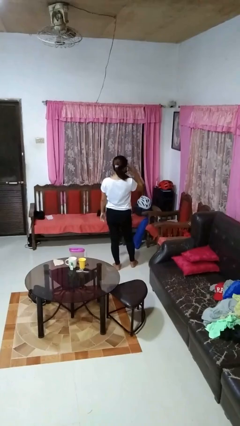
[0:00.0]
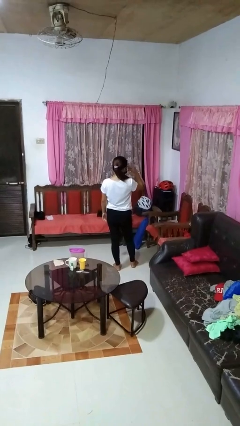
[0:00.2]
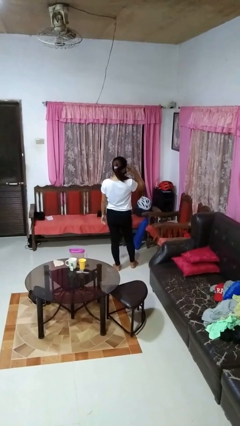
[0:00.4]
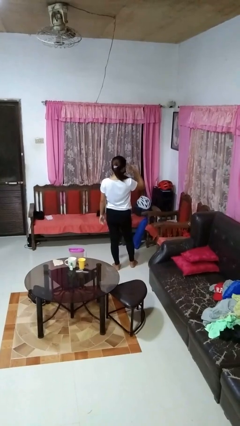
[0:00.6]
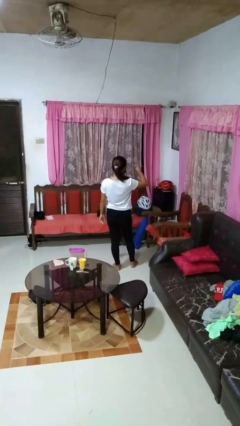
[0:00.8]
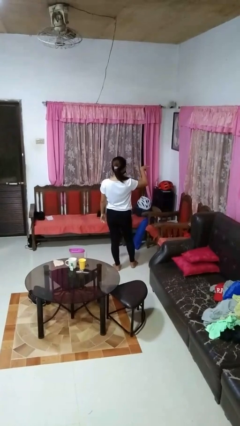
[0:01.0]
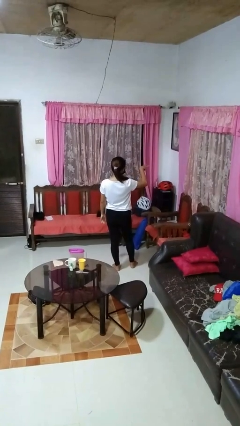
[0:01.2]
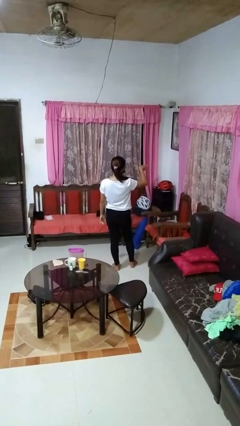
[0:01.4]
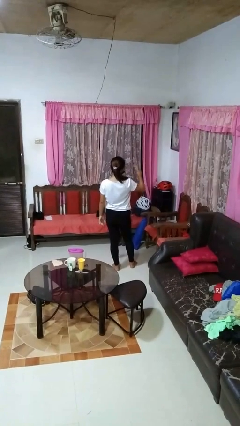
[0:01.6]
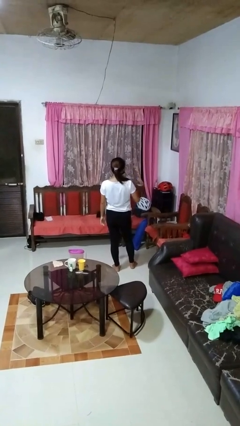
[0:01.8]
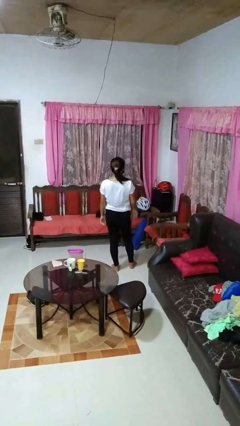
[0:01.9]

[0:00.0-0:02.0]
person gestures watch closely

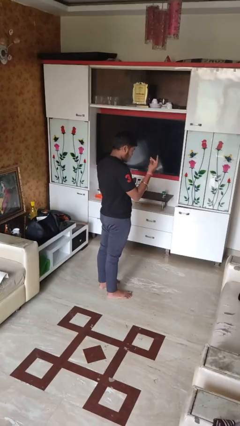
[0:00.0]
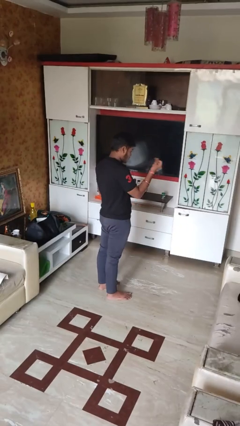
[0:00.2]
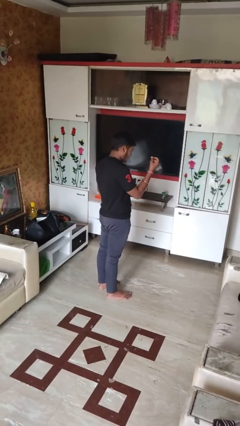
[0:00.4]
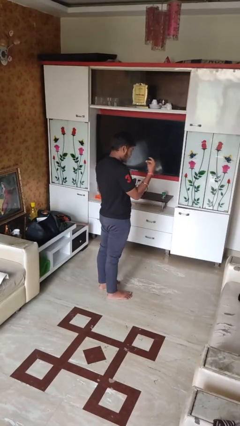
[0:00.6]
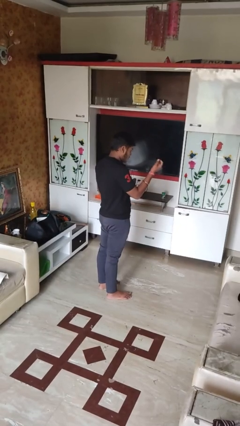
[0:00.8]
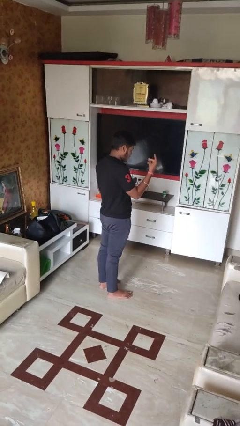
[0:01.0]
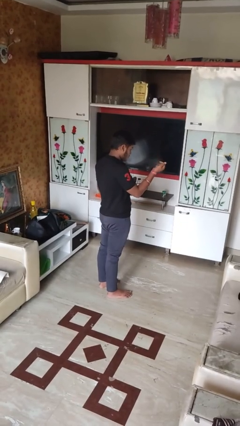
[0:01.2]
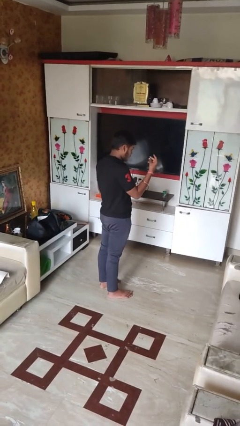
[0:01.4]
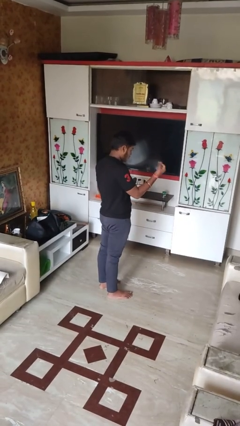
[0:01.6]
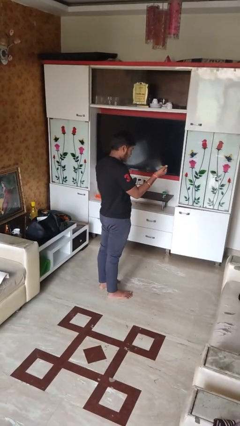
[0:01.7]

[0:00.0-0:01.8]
person snaps fingers

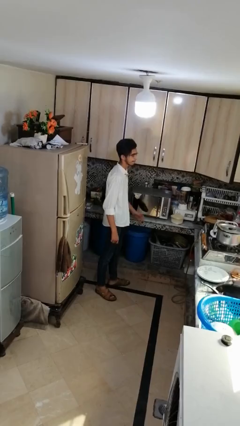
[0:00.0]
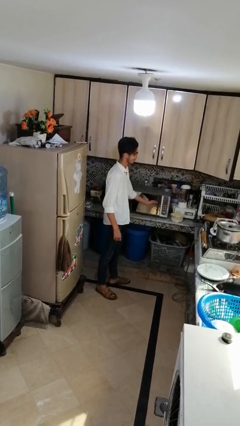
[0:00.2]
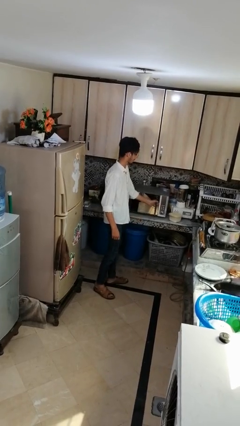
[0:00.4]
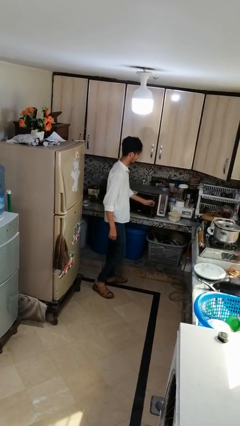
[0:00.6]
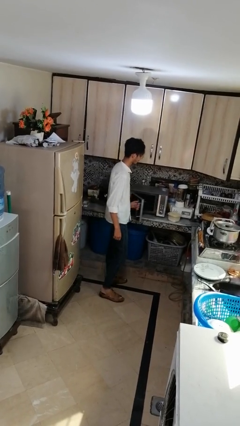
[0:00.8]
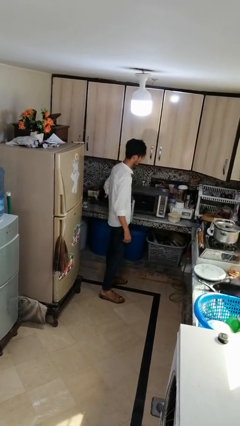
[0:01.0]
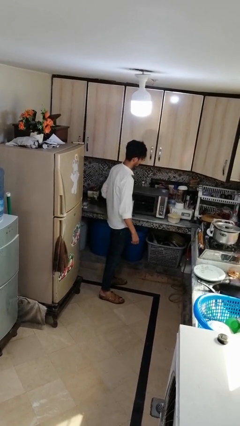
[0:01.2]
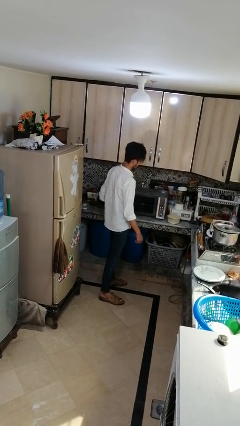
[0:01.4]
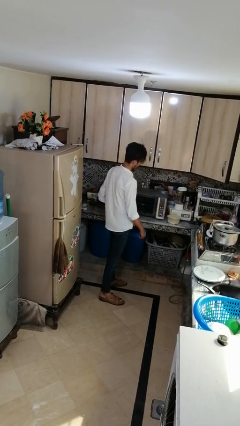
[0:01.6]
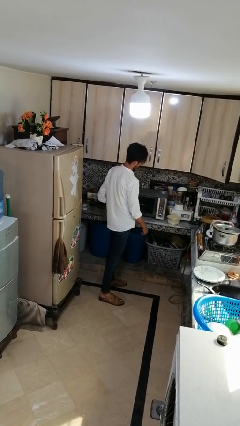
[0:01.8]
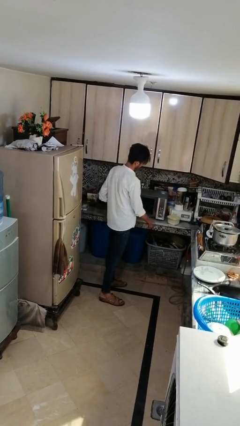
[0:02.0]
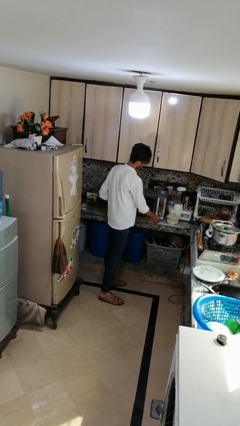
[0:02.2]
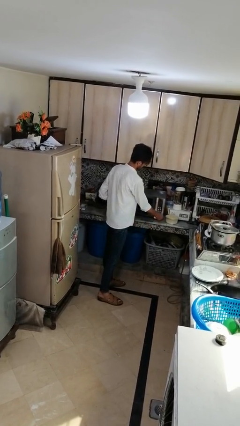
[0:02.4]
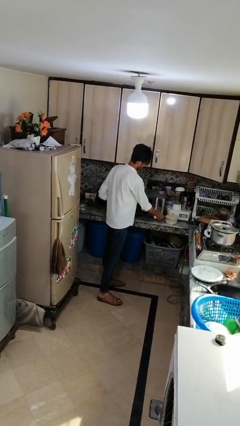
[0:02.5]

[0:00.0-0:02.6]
person opens microwave

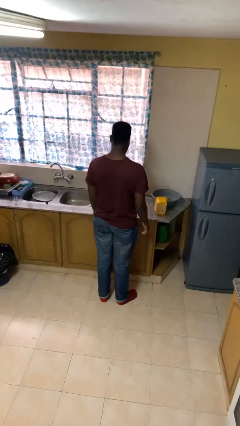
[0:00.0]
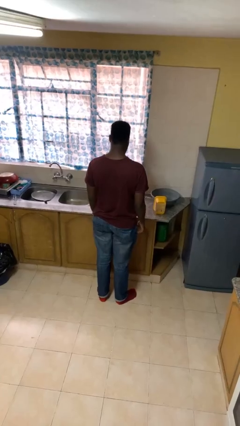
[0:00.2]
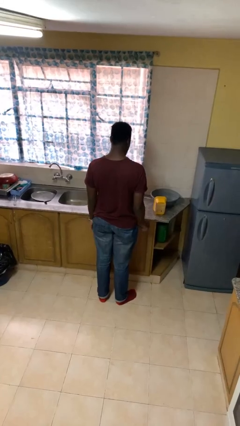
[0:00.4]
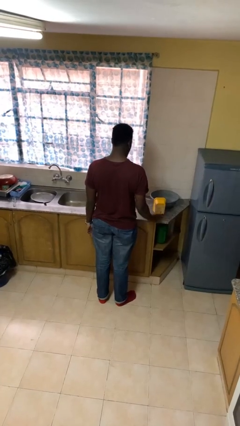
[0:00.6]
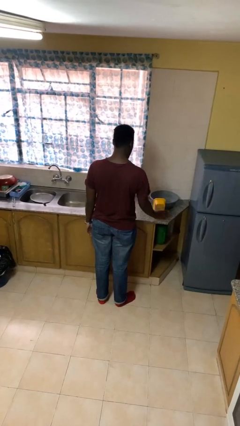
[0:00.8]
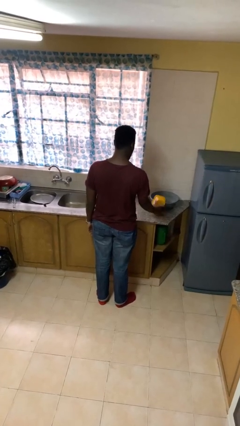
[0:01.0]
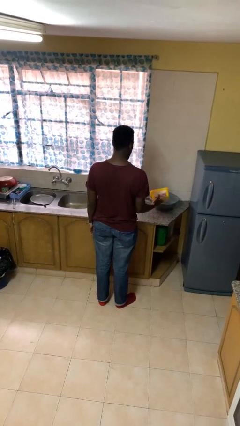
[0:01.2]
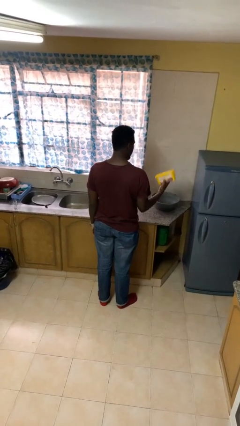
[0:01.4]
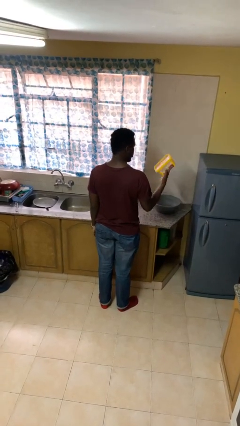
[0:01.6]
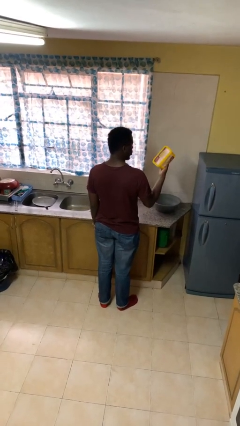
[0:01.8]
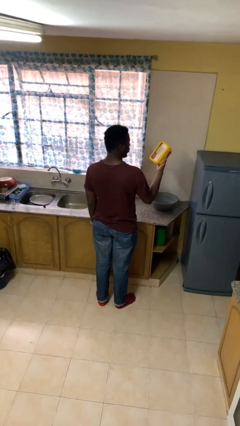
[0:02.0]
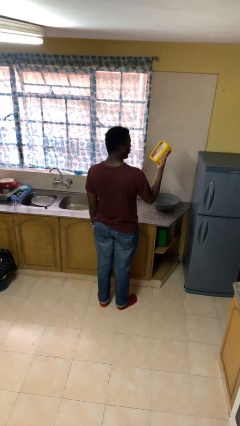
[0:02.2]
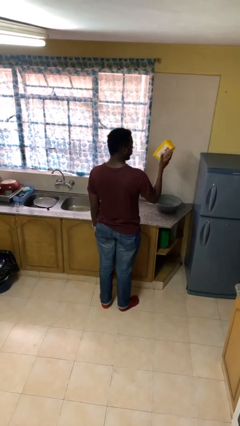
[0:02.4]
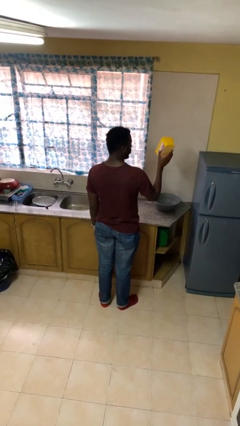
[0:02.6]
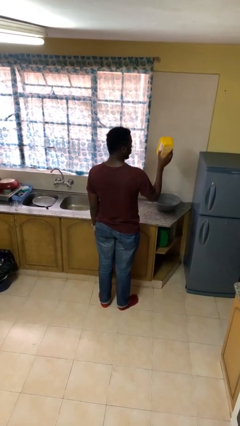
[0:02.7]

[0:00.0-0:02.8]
person picks up object from countertop

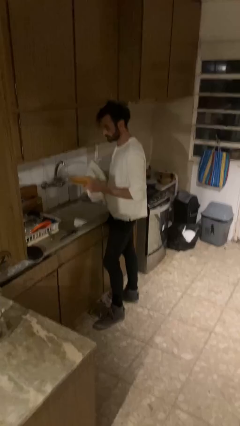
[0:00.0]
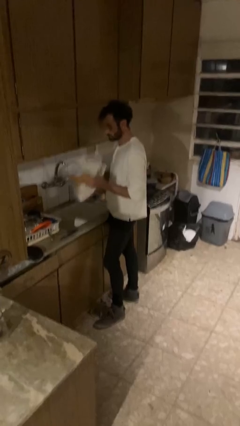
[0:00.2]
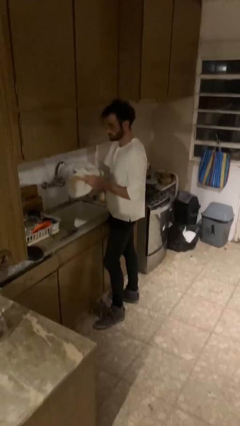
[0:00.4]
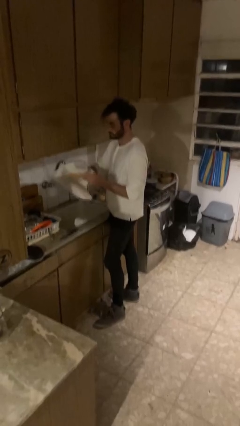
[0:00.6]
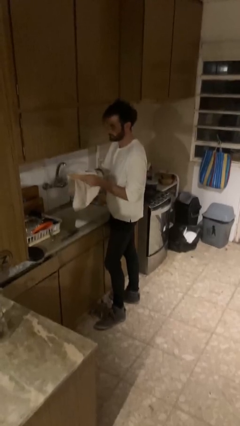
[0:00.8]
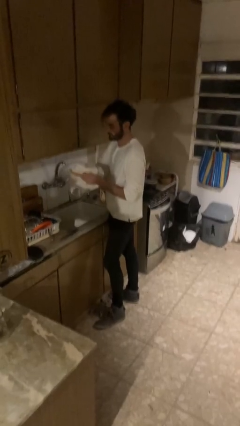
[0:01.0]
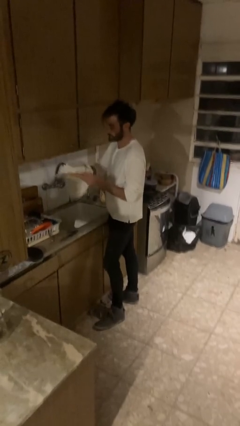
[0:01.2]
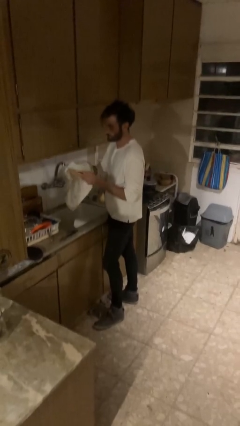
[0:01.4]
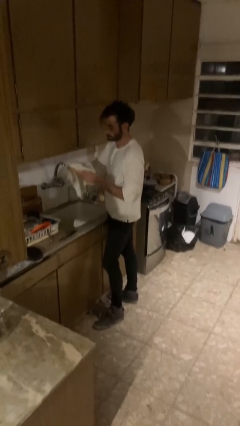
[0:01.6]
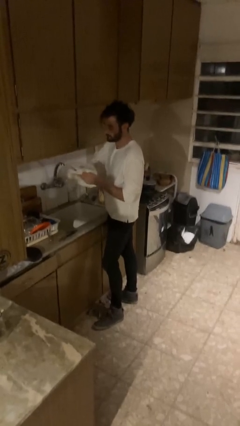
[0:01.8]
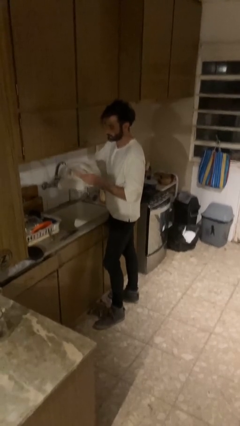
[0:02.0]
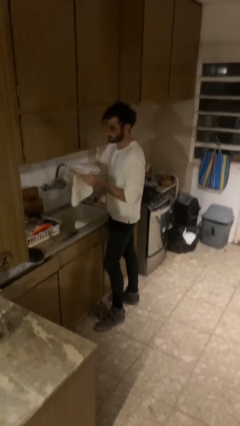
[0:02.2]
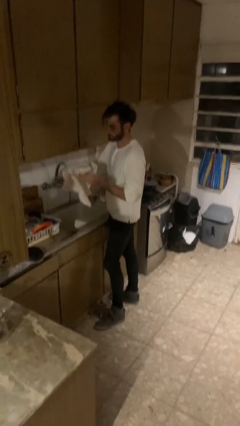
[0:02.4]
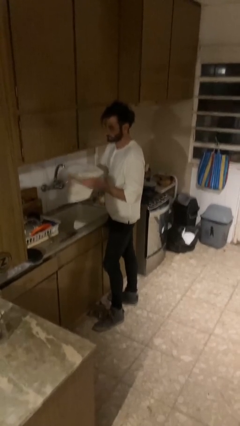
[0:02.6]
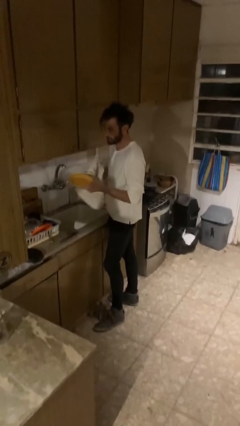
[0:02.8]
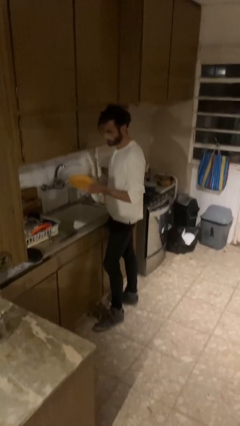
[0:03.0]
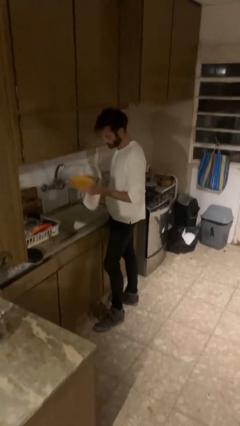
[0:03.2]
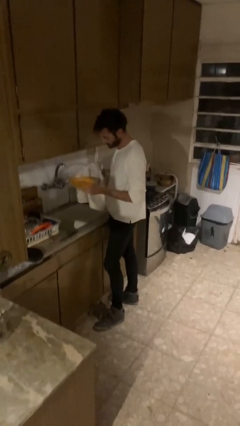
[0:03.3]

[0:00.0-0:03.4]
person dries dish

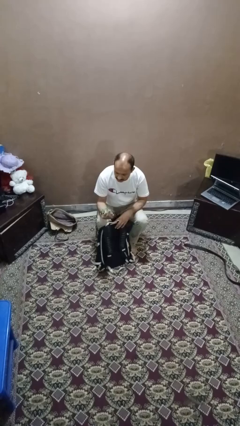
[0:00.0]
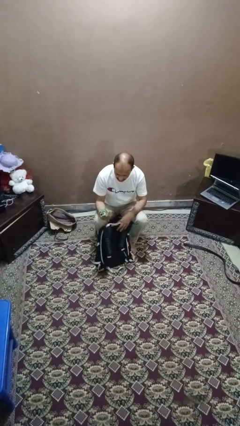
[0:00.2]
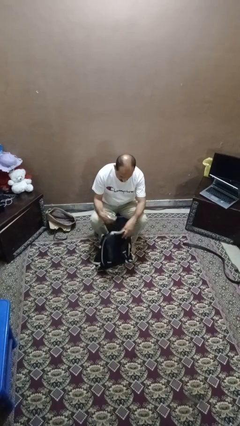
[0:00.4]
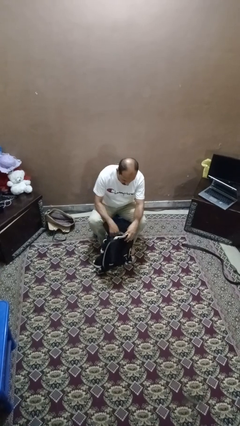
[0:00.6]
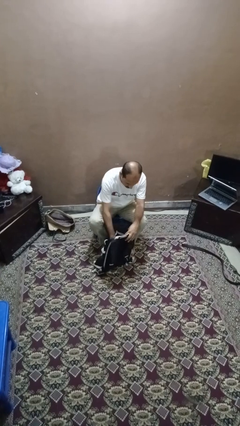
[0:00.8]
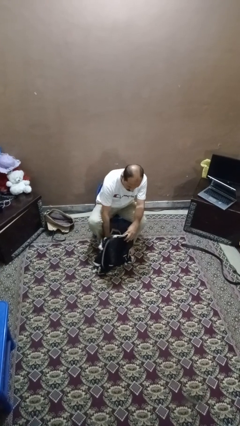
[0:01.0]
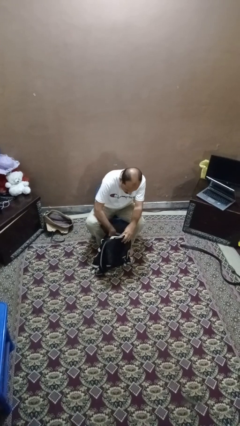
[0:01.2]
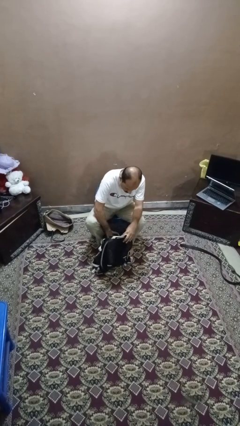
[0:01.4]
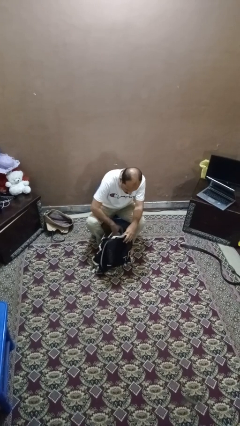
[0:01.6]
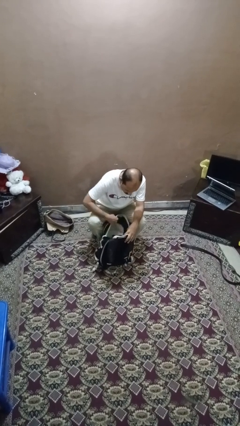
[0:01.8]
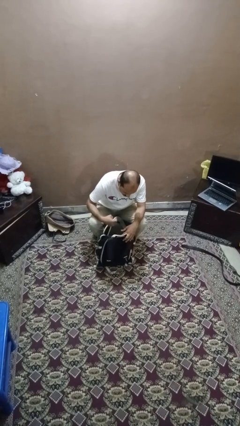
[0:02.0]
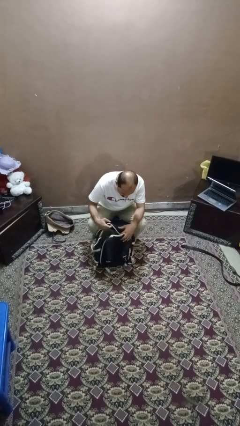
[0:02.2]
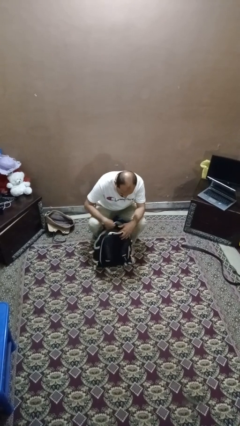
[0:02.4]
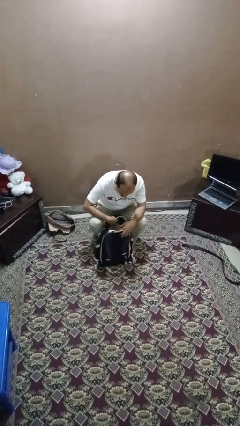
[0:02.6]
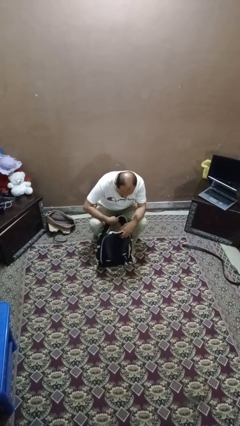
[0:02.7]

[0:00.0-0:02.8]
person puts object into backpack

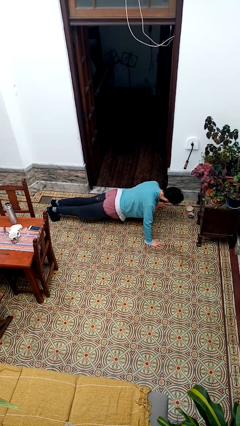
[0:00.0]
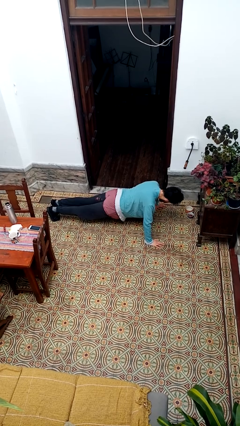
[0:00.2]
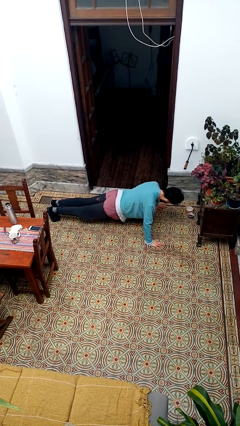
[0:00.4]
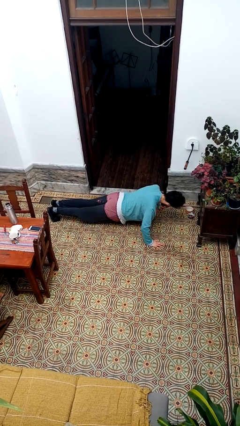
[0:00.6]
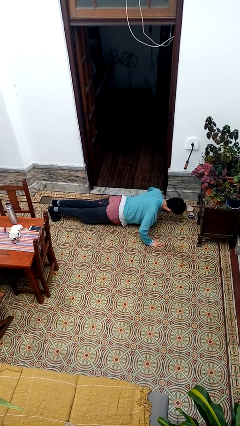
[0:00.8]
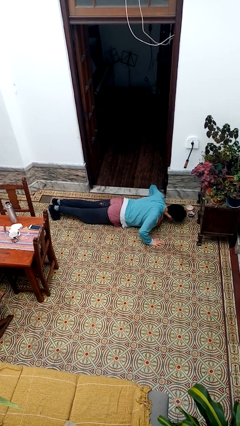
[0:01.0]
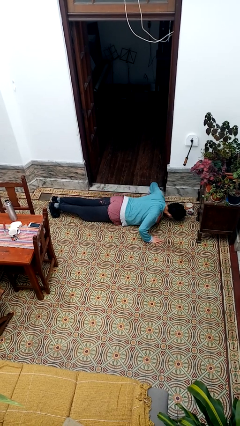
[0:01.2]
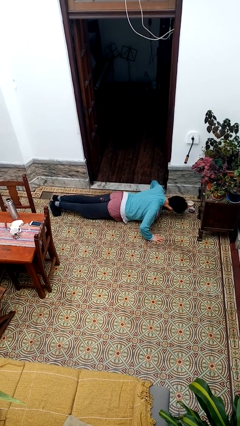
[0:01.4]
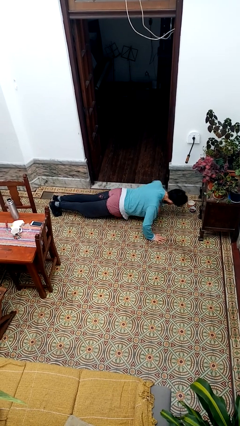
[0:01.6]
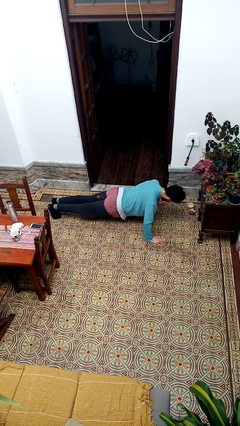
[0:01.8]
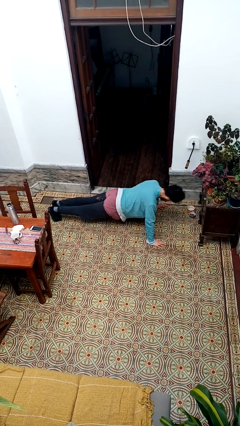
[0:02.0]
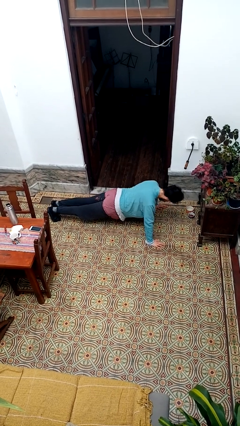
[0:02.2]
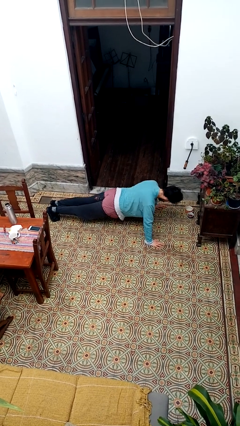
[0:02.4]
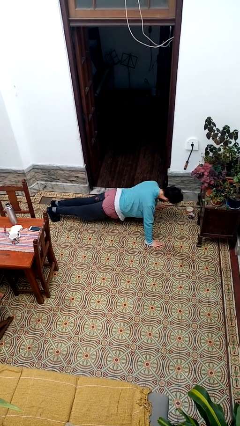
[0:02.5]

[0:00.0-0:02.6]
person exercises with pushup
